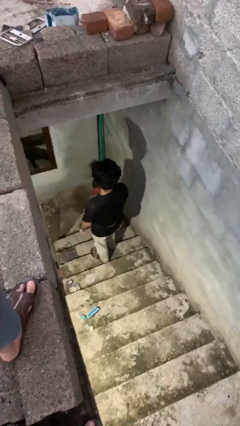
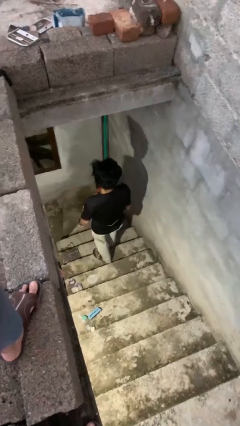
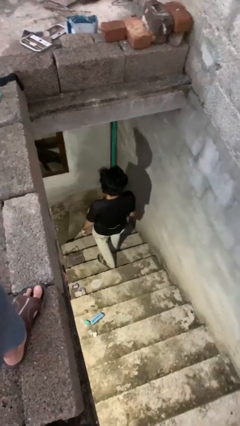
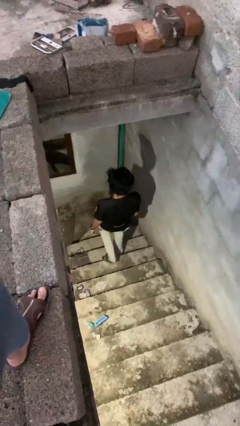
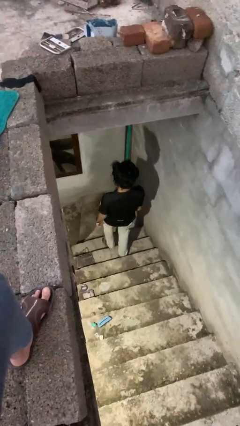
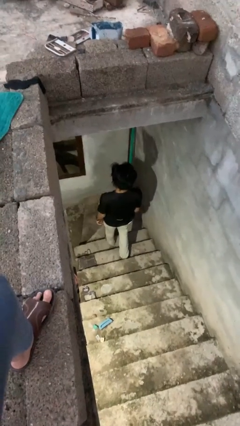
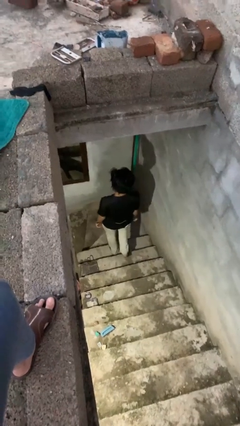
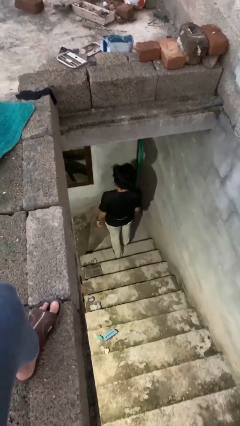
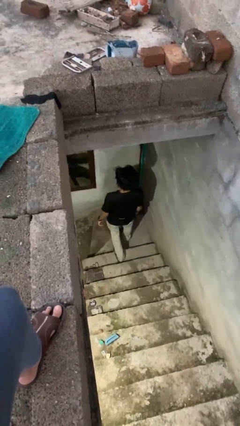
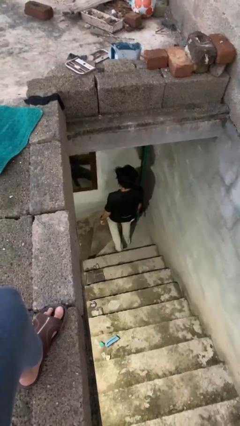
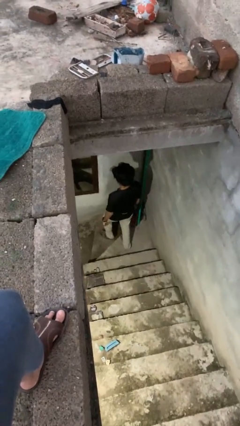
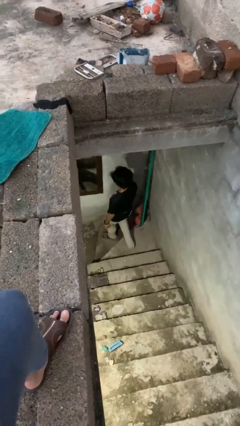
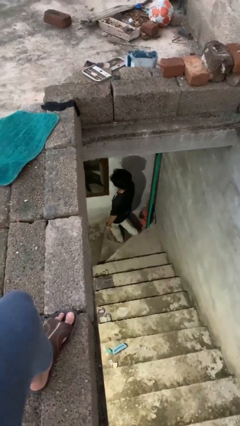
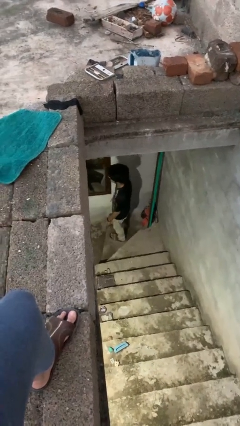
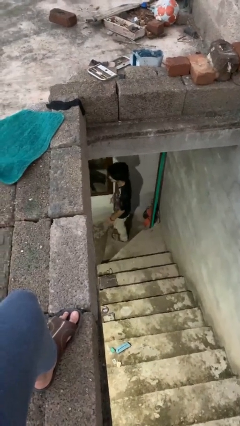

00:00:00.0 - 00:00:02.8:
person climbs down stairs

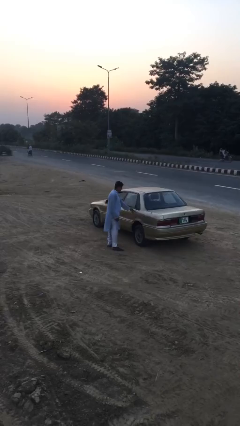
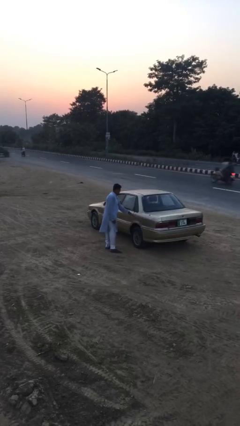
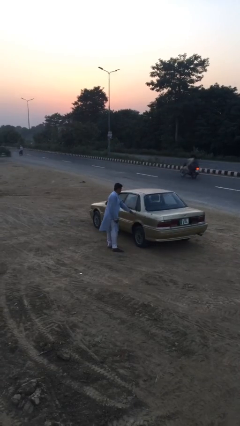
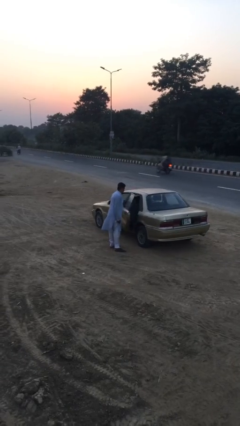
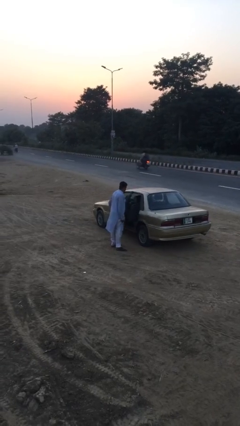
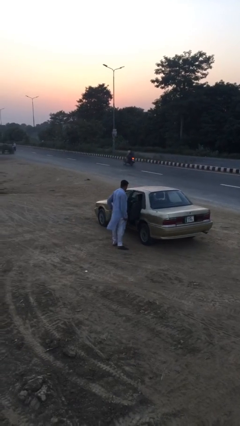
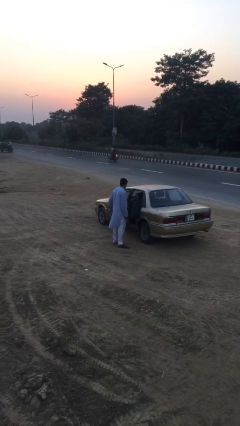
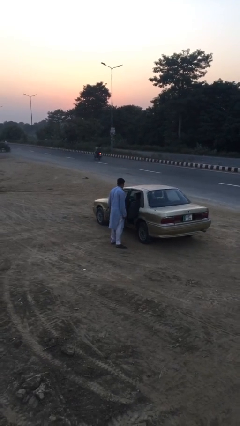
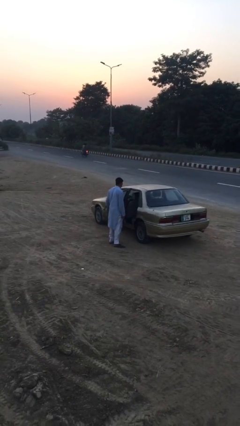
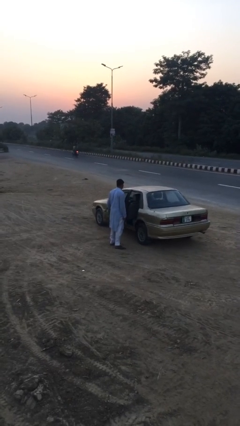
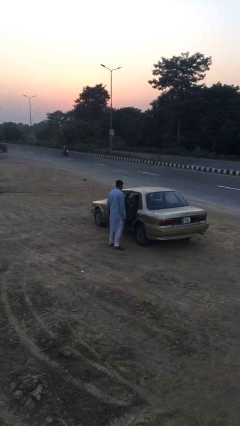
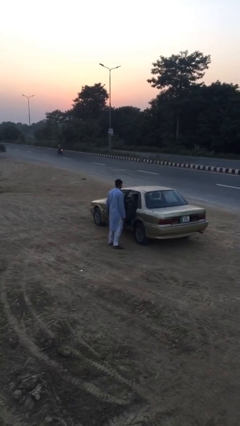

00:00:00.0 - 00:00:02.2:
person opens car door

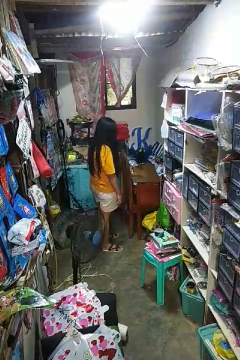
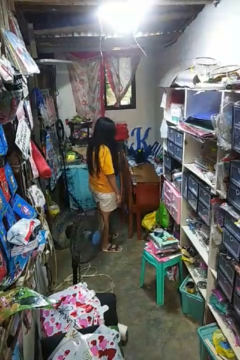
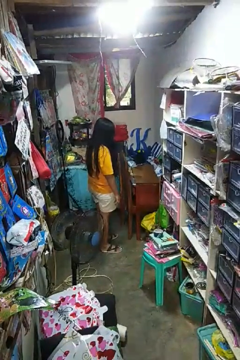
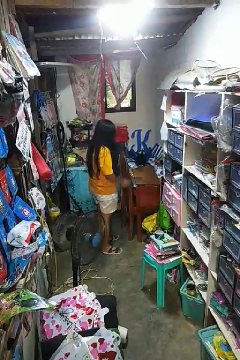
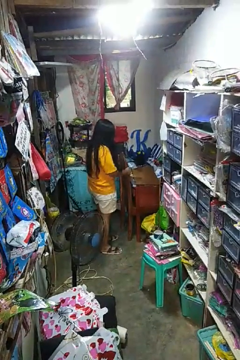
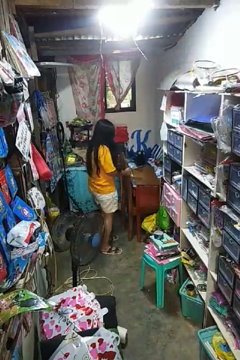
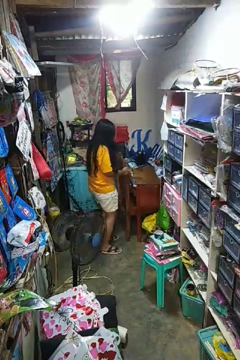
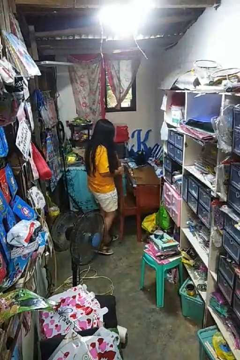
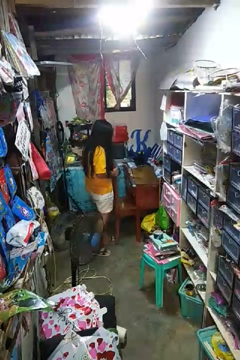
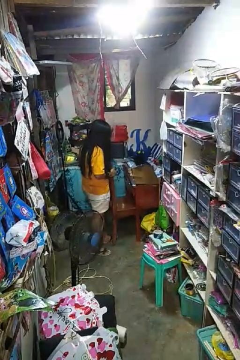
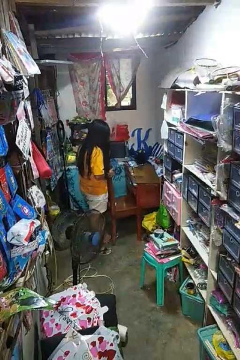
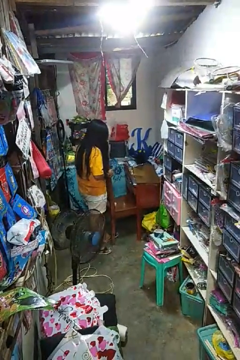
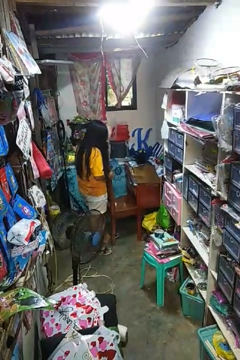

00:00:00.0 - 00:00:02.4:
person pulls out chair

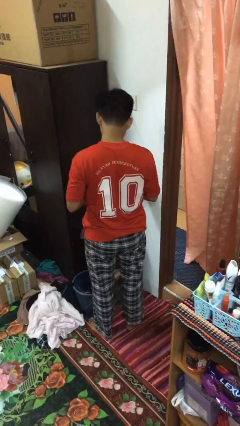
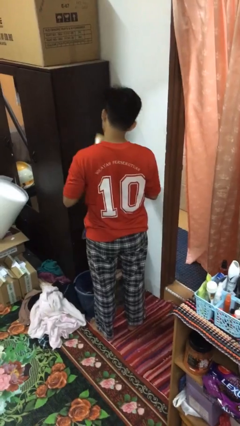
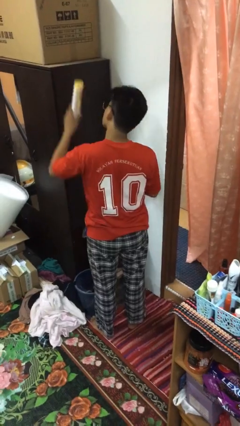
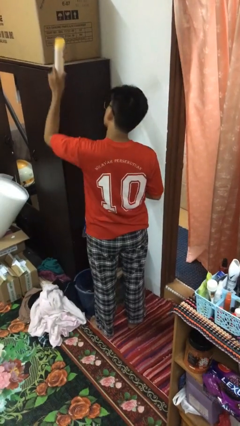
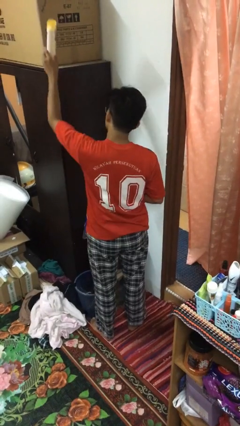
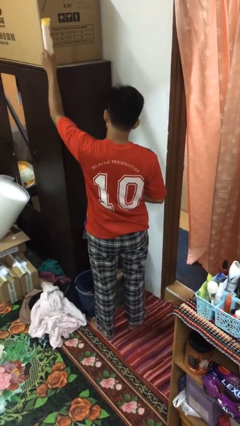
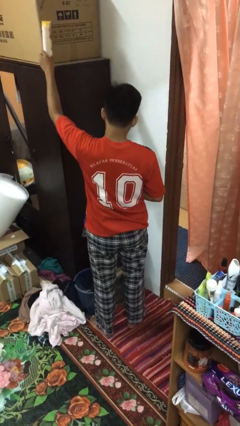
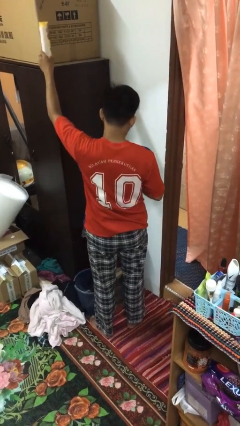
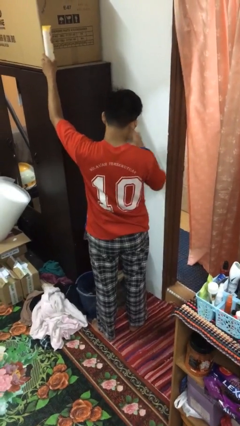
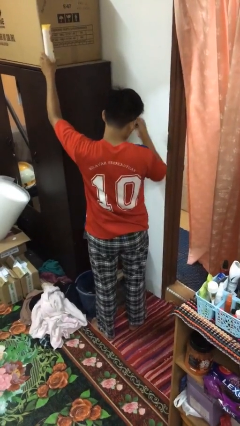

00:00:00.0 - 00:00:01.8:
person puts down object on shelf

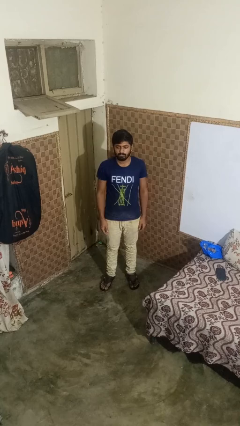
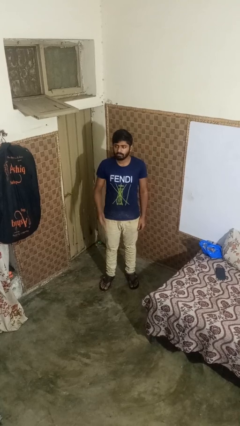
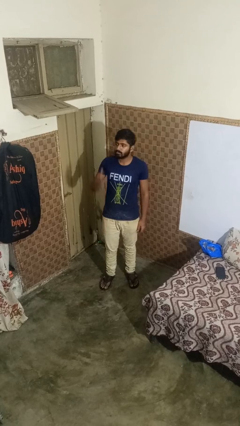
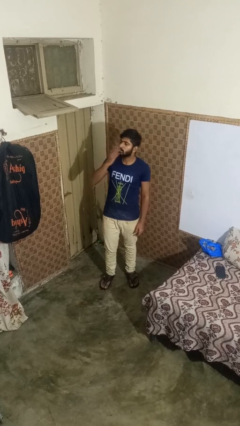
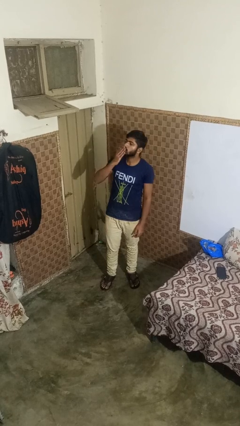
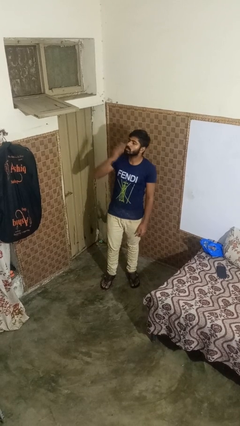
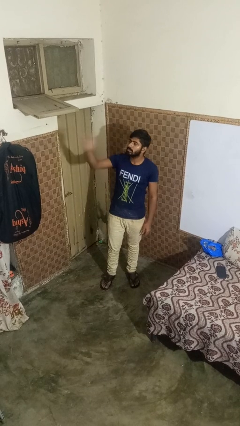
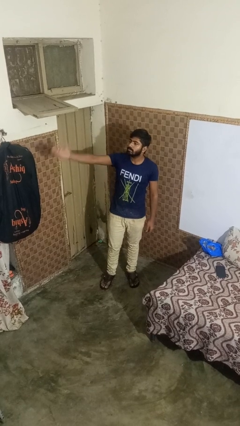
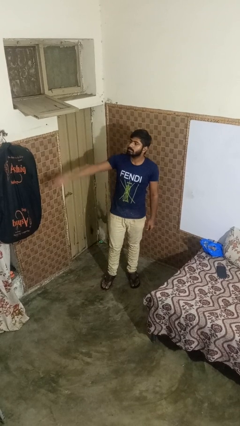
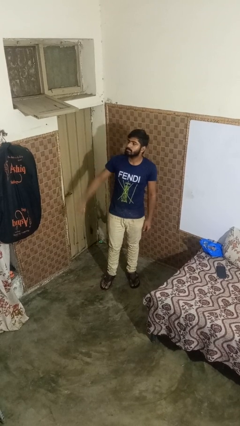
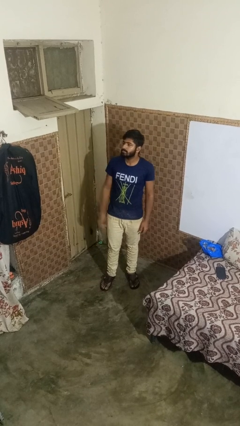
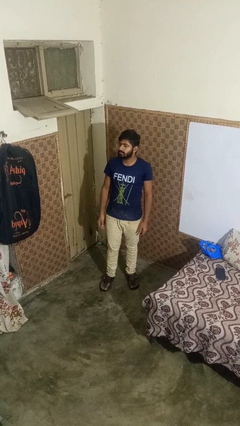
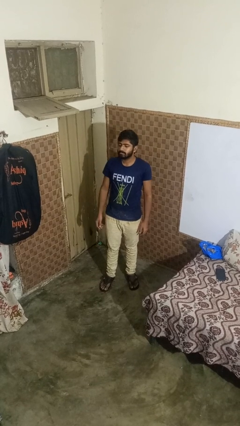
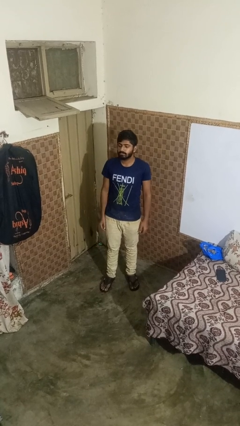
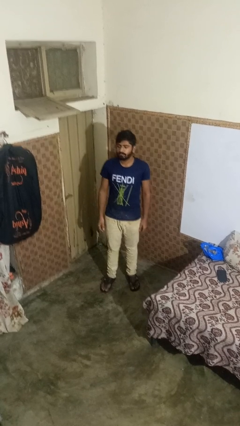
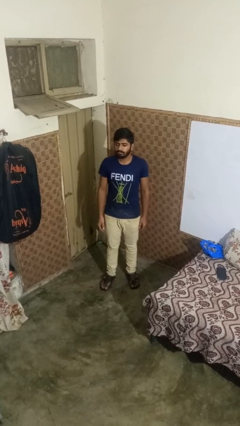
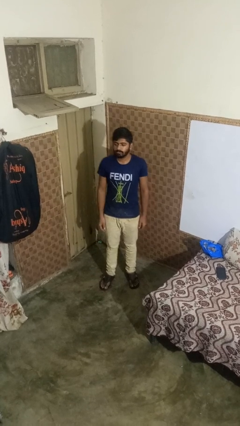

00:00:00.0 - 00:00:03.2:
person gestures blow kiss

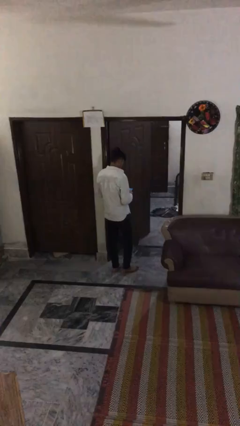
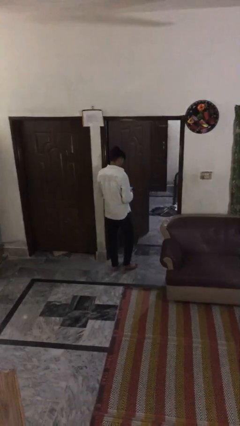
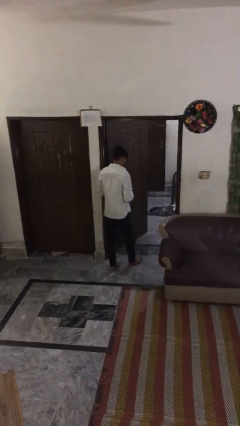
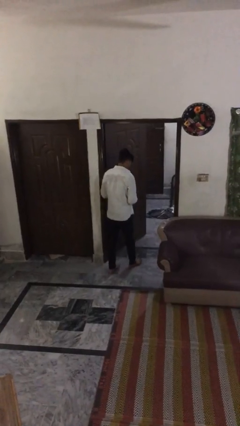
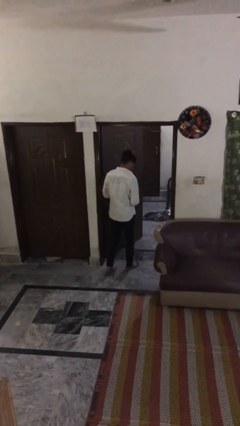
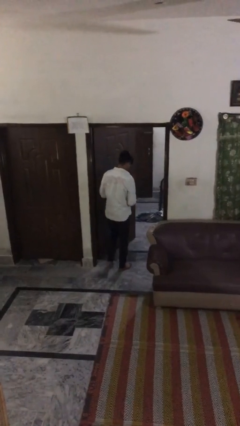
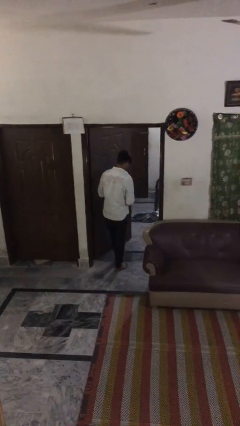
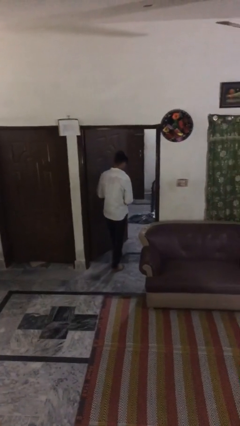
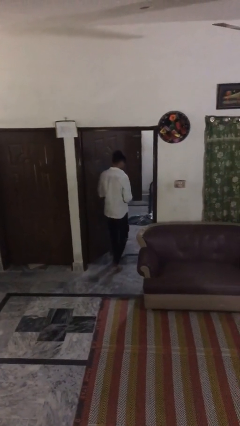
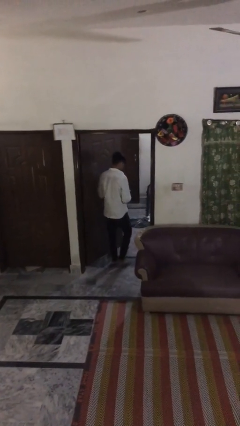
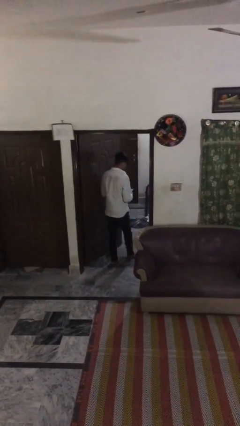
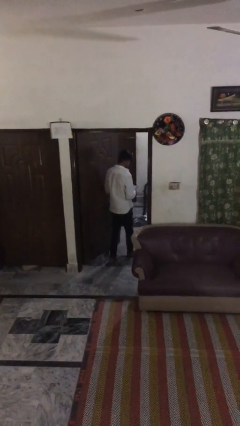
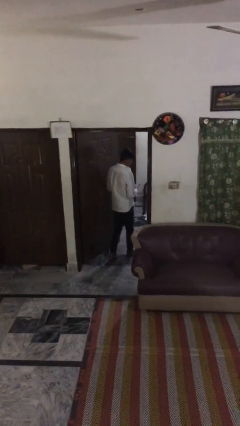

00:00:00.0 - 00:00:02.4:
person enters scene through structure

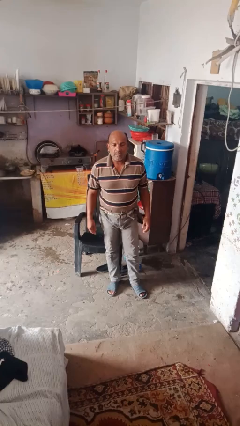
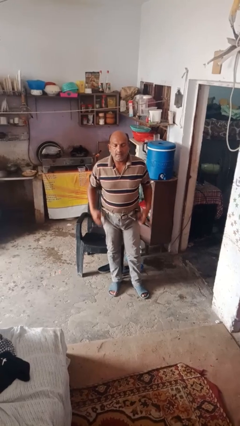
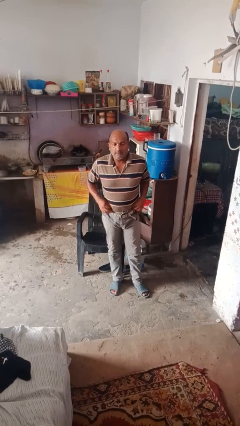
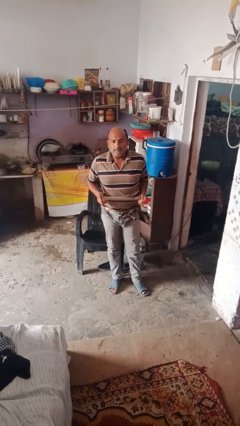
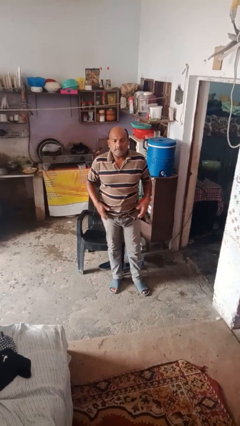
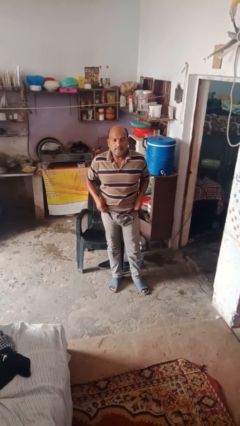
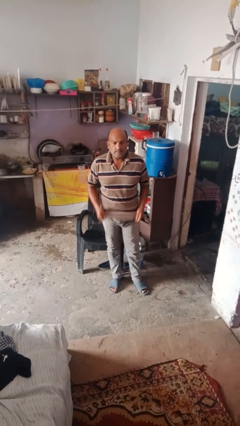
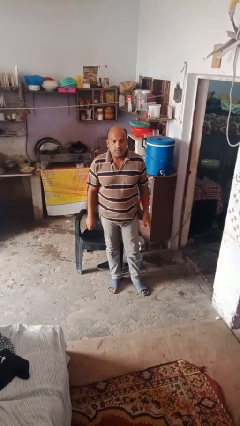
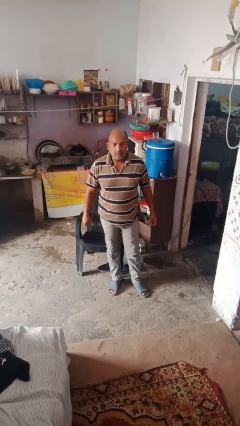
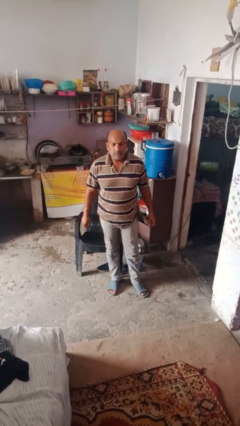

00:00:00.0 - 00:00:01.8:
person untucks shirt

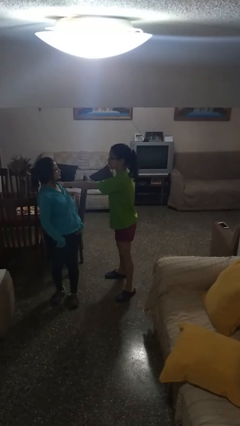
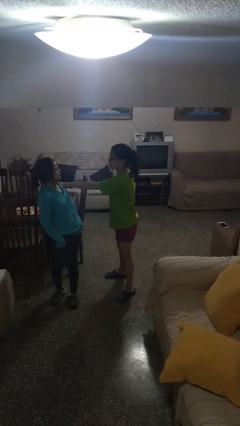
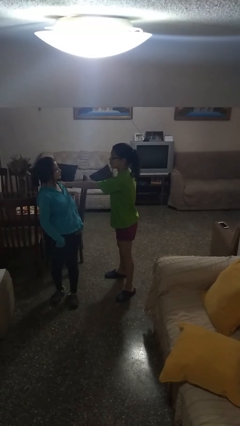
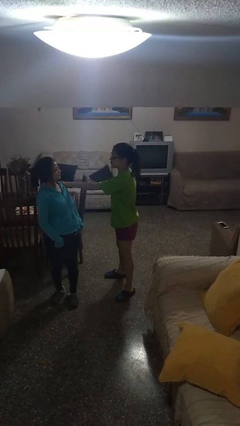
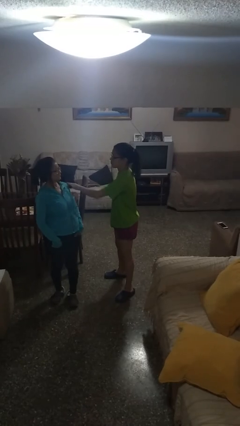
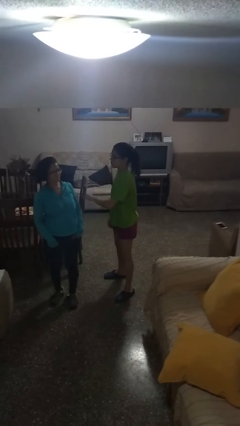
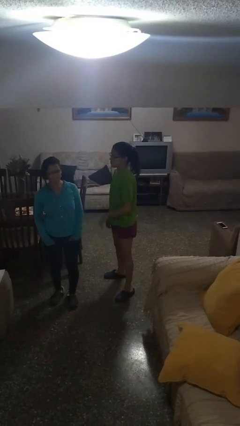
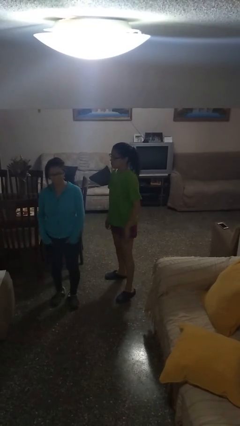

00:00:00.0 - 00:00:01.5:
person spins person around
